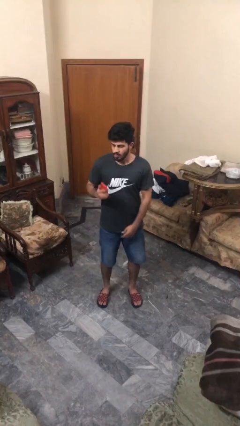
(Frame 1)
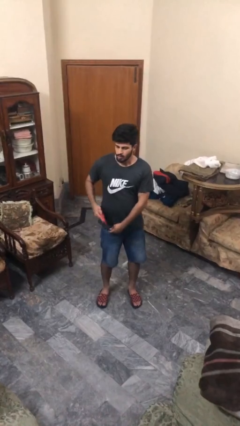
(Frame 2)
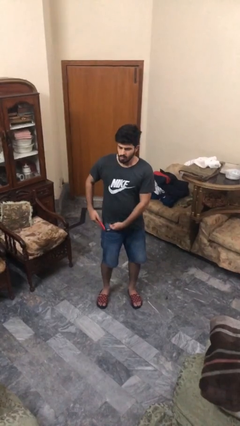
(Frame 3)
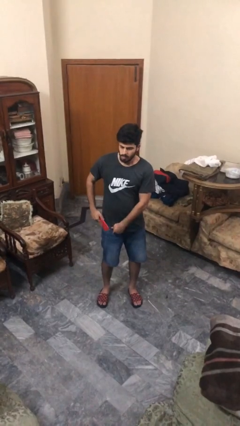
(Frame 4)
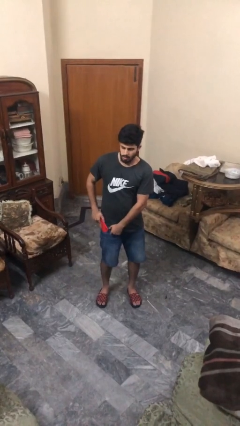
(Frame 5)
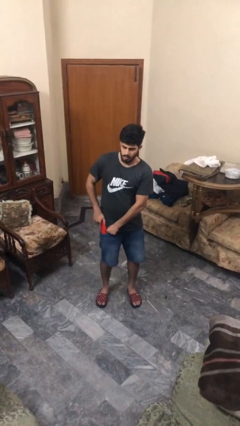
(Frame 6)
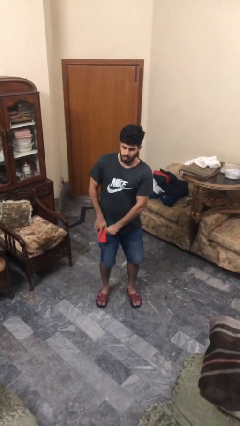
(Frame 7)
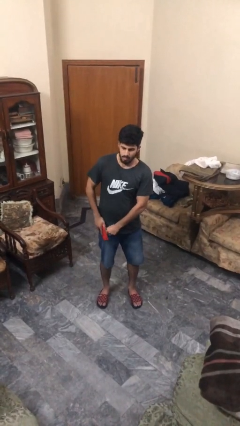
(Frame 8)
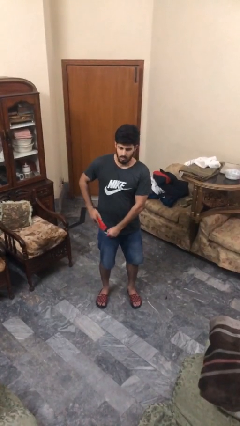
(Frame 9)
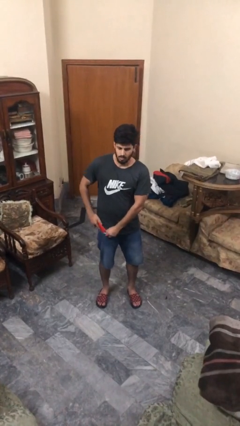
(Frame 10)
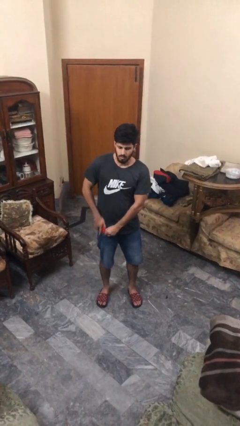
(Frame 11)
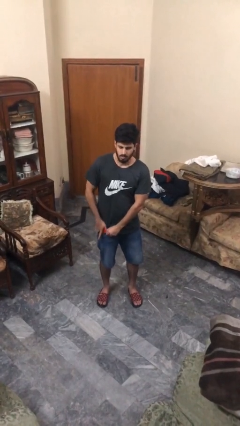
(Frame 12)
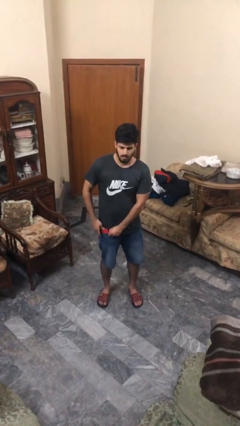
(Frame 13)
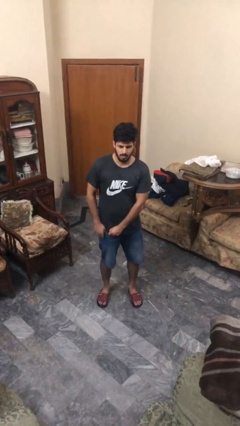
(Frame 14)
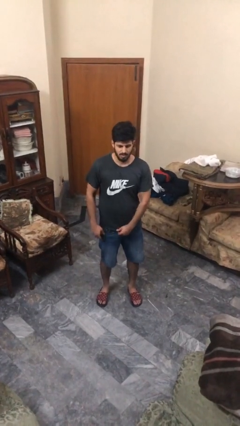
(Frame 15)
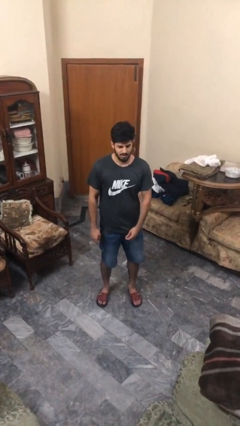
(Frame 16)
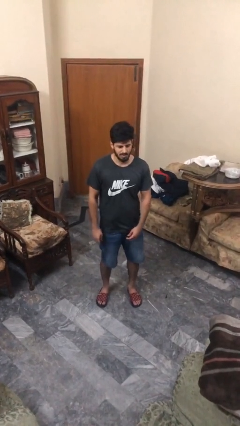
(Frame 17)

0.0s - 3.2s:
person puts phone into pocket

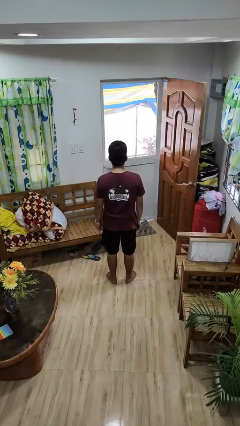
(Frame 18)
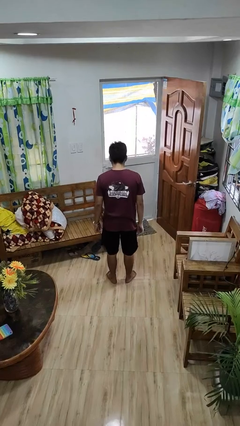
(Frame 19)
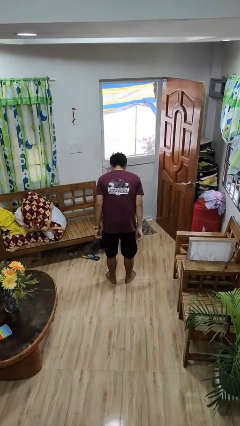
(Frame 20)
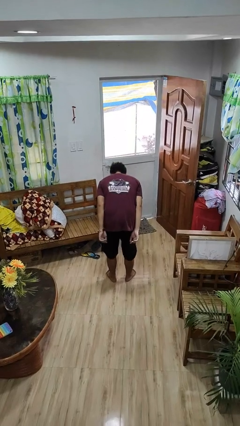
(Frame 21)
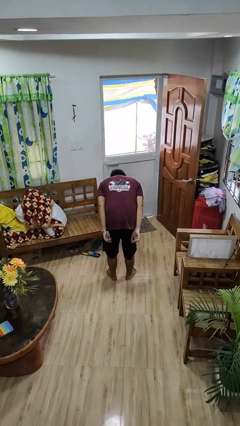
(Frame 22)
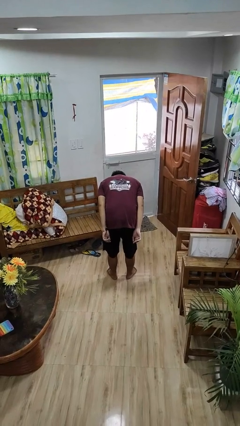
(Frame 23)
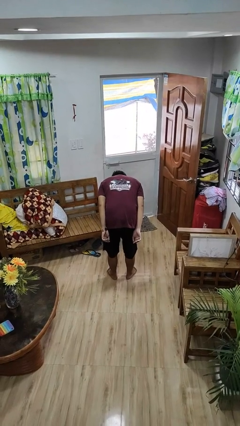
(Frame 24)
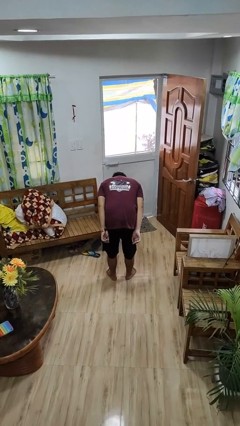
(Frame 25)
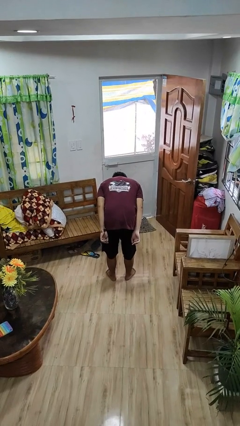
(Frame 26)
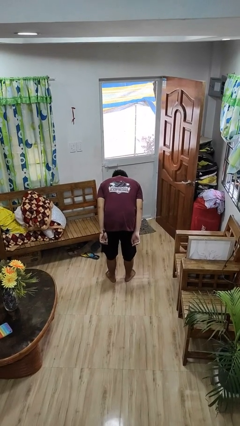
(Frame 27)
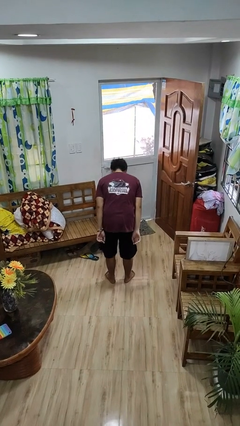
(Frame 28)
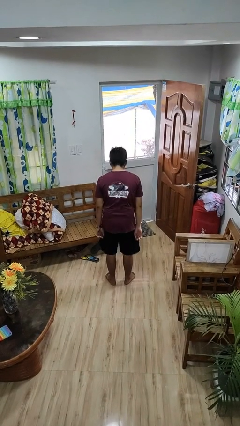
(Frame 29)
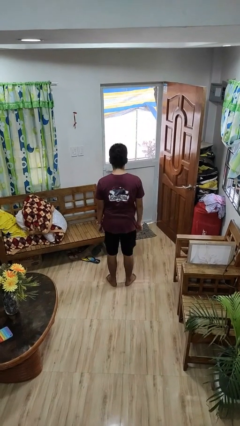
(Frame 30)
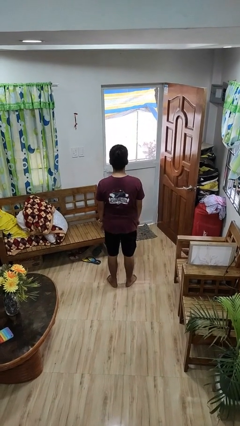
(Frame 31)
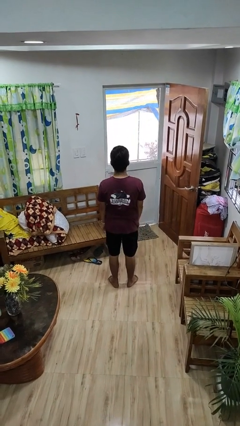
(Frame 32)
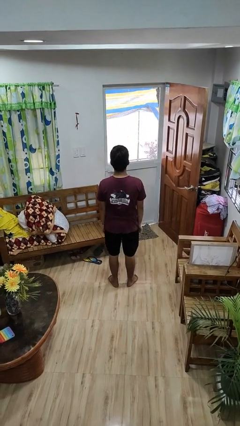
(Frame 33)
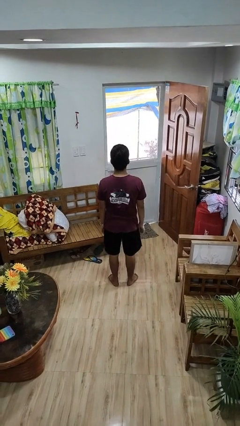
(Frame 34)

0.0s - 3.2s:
person bows

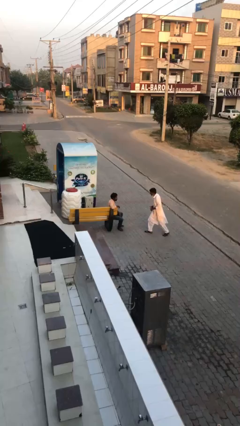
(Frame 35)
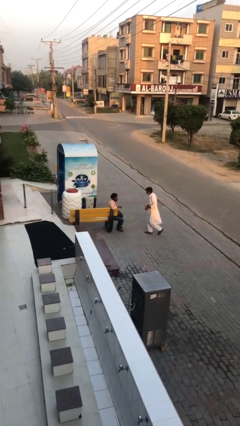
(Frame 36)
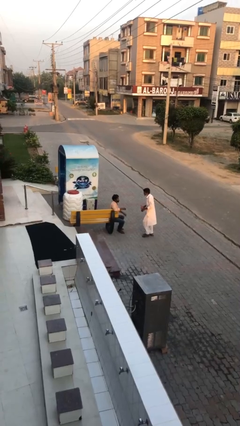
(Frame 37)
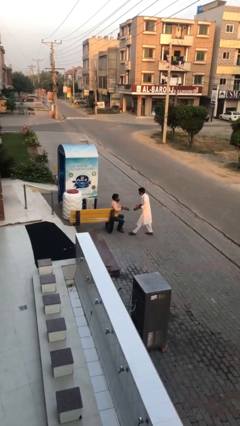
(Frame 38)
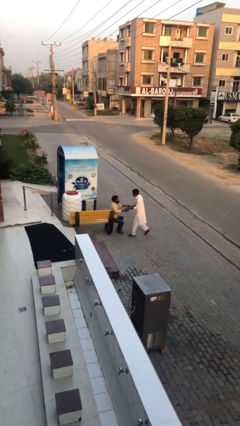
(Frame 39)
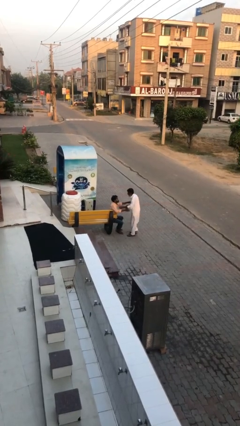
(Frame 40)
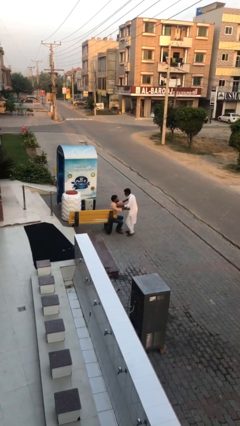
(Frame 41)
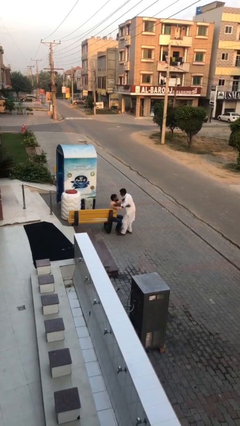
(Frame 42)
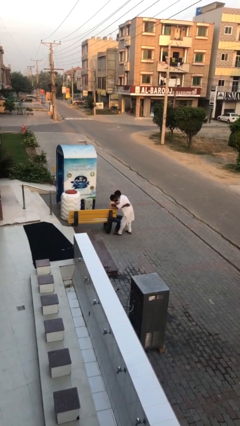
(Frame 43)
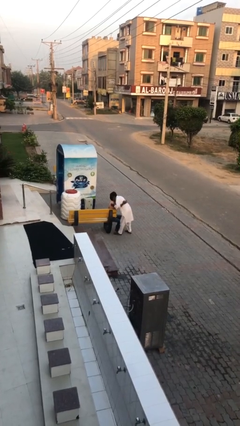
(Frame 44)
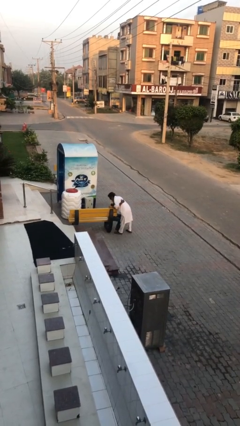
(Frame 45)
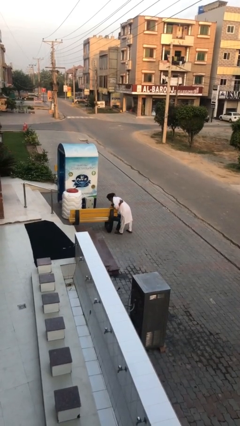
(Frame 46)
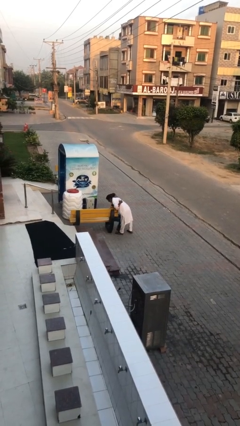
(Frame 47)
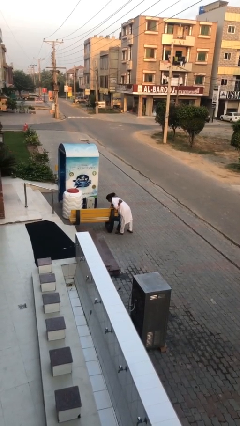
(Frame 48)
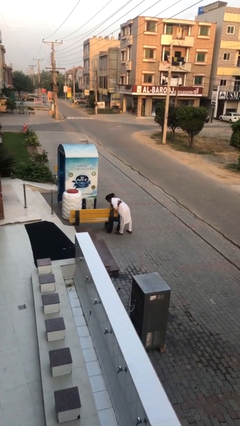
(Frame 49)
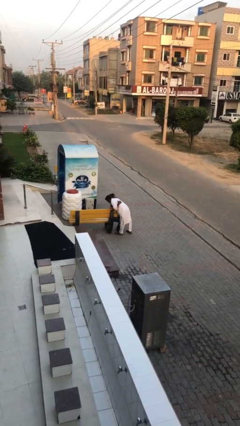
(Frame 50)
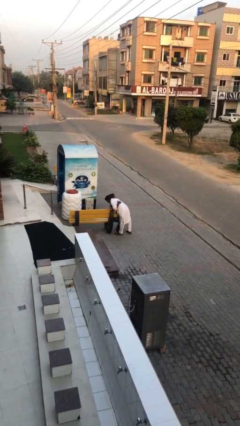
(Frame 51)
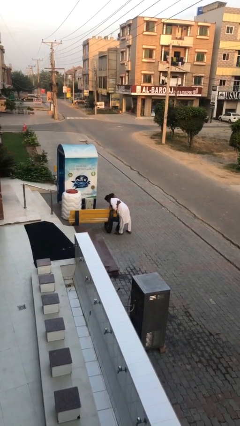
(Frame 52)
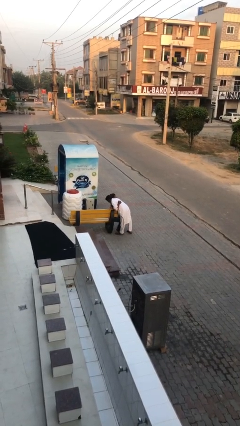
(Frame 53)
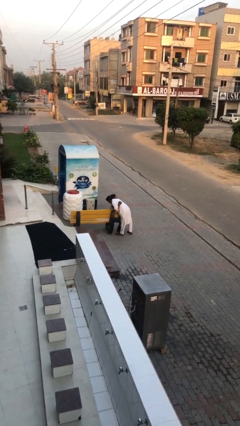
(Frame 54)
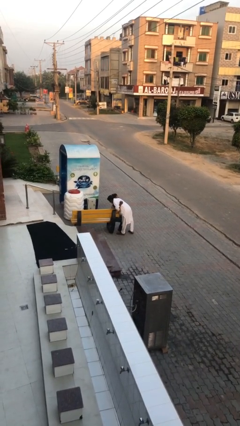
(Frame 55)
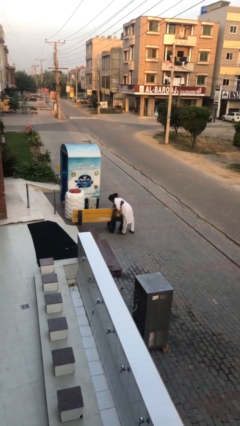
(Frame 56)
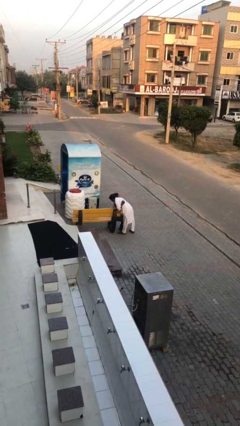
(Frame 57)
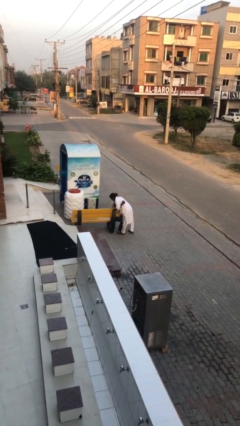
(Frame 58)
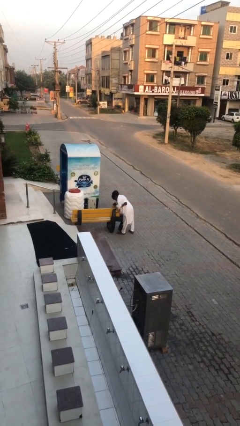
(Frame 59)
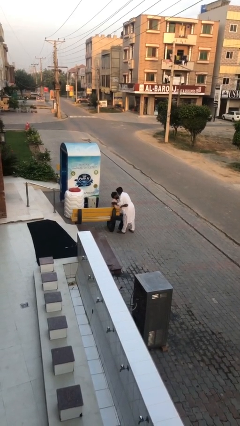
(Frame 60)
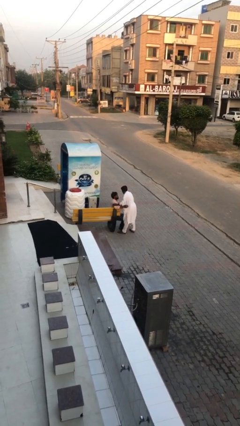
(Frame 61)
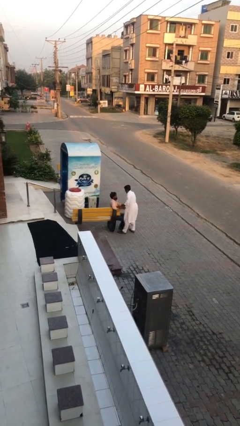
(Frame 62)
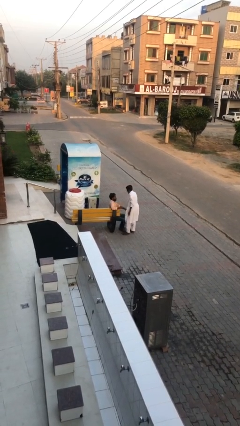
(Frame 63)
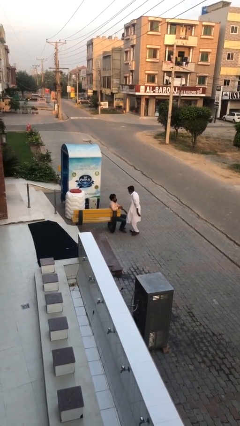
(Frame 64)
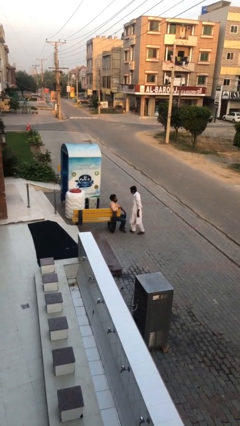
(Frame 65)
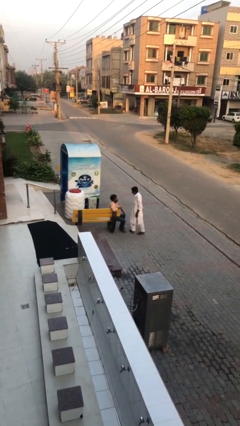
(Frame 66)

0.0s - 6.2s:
person embraces person

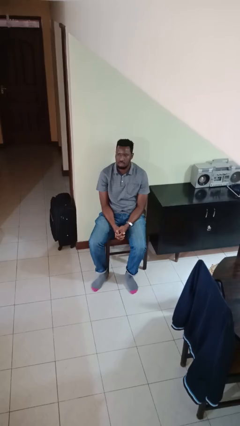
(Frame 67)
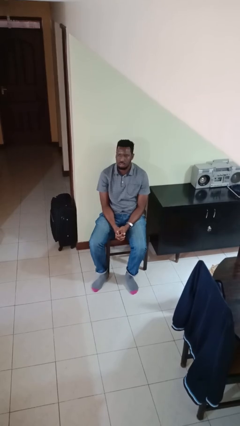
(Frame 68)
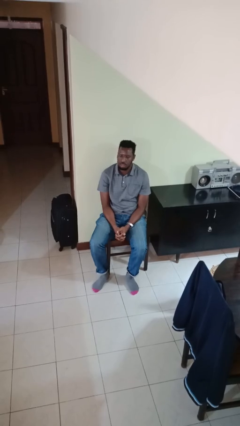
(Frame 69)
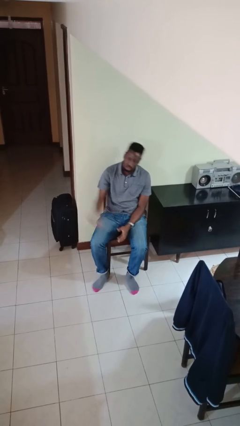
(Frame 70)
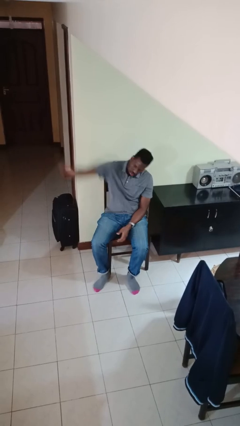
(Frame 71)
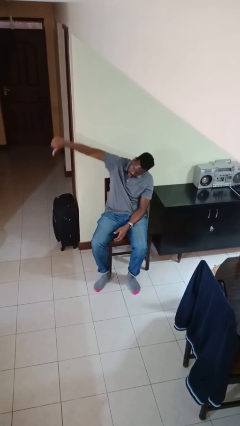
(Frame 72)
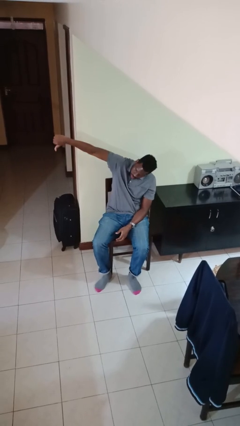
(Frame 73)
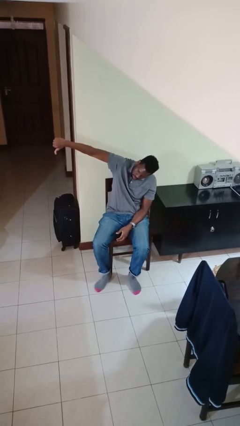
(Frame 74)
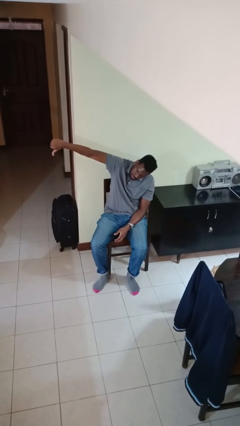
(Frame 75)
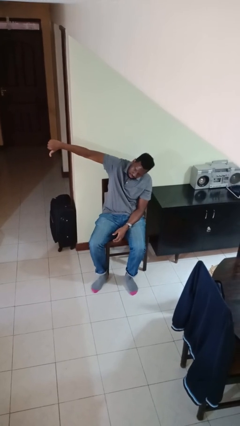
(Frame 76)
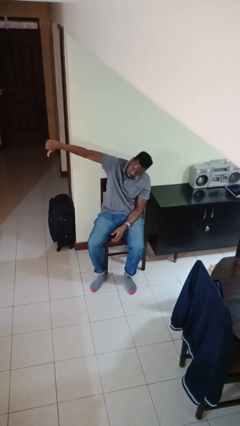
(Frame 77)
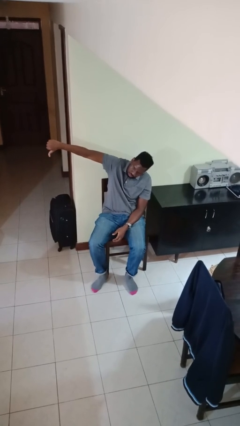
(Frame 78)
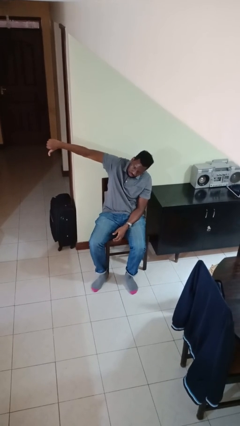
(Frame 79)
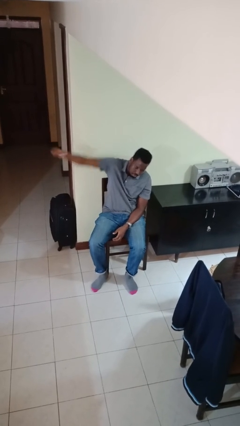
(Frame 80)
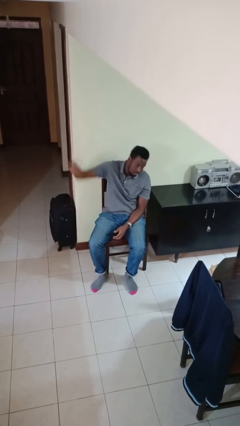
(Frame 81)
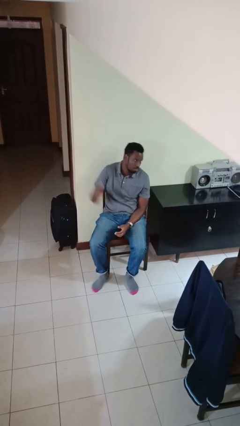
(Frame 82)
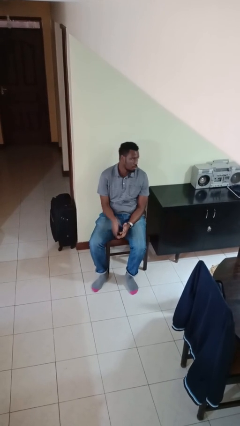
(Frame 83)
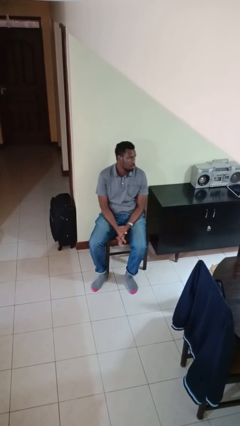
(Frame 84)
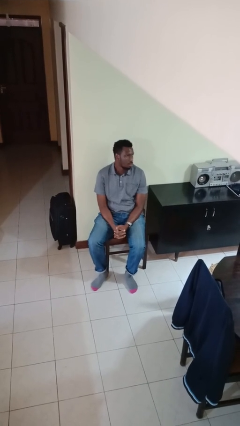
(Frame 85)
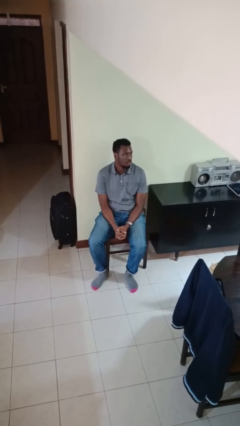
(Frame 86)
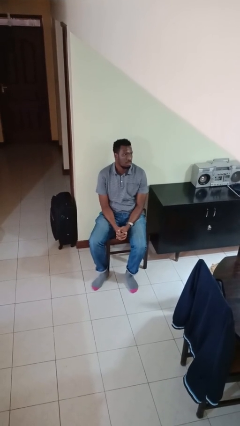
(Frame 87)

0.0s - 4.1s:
person gestures thumbs down

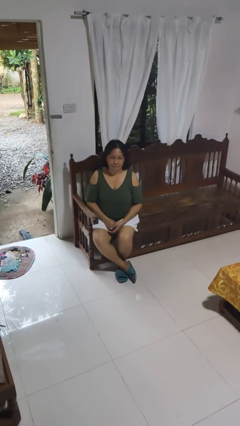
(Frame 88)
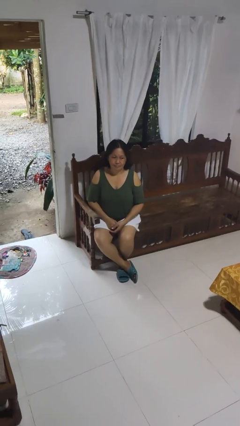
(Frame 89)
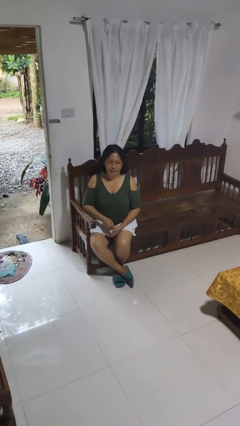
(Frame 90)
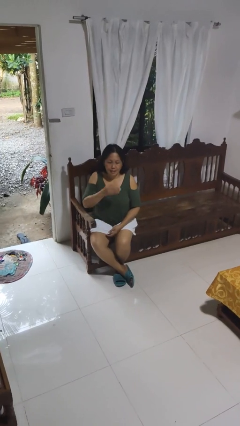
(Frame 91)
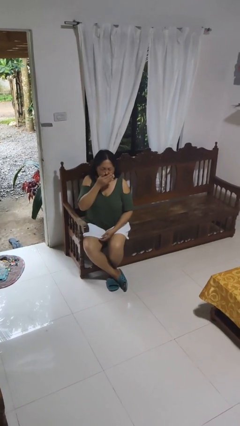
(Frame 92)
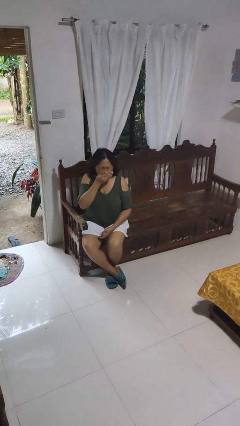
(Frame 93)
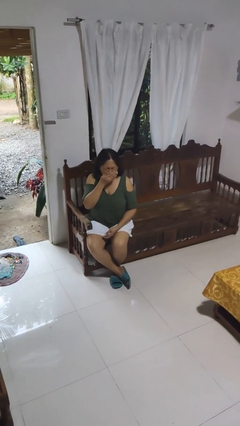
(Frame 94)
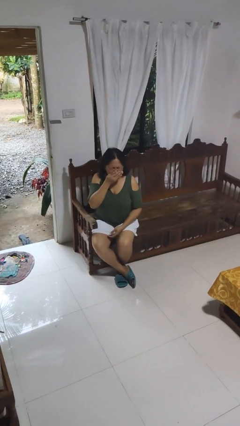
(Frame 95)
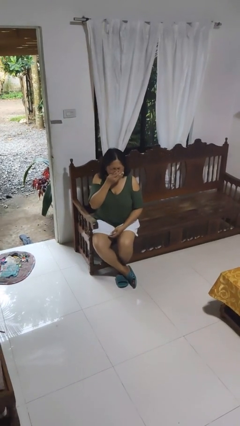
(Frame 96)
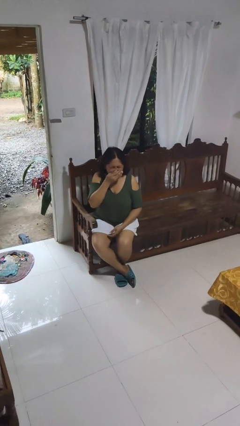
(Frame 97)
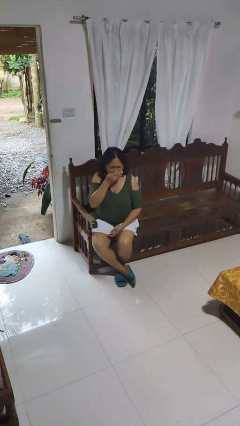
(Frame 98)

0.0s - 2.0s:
person sneezes into hand
